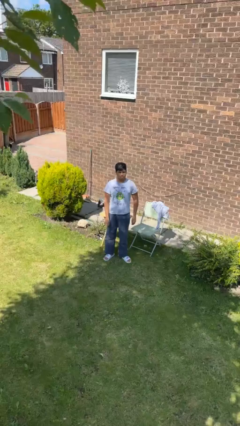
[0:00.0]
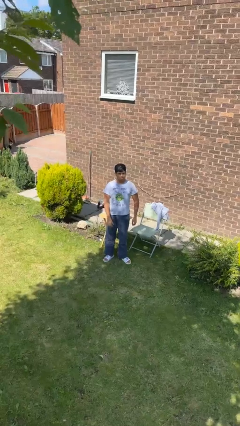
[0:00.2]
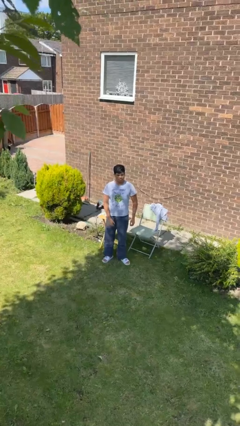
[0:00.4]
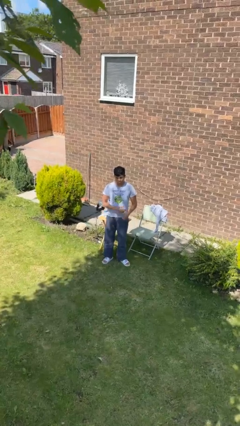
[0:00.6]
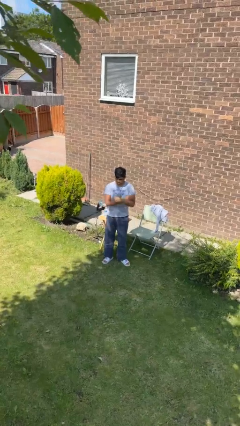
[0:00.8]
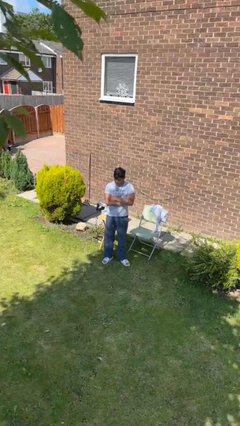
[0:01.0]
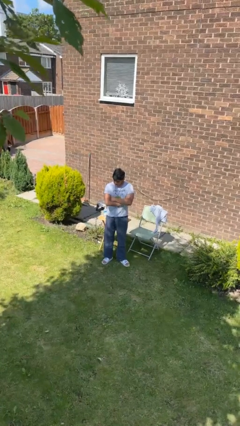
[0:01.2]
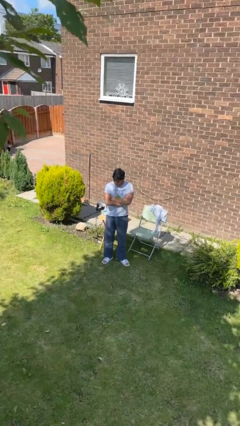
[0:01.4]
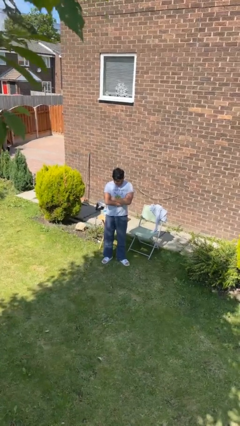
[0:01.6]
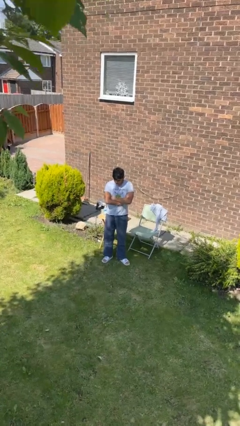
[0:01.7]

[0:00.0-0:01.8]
person crosses arms

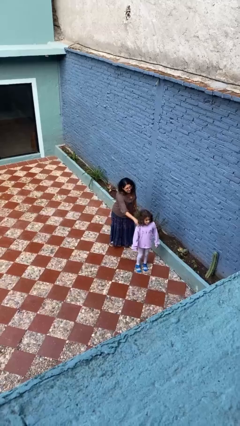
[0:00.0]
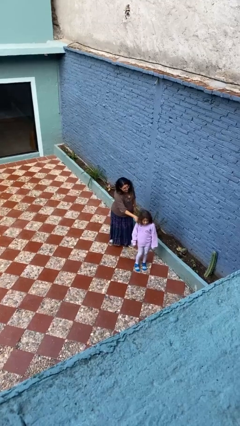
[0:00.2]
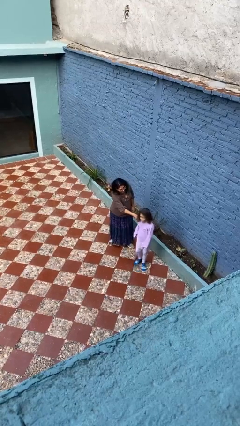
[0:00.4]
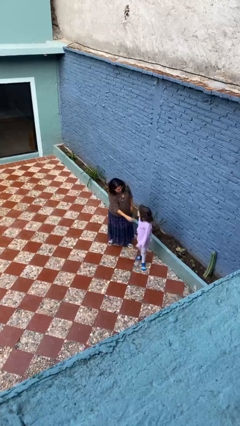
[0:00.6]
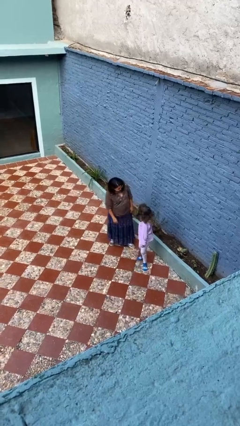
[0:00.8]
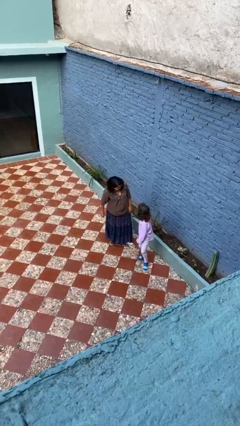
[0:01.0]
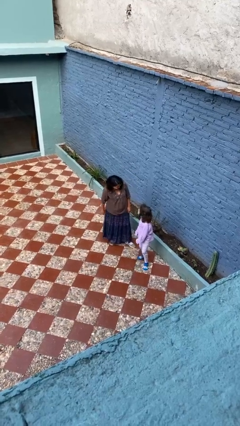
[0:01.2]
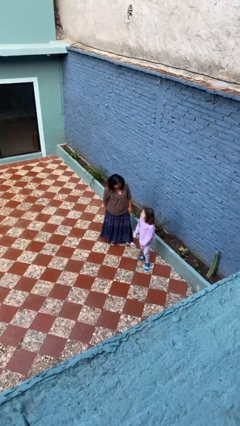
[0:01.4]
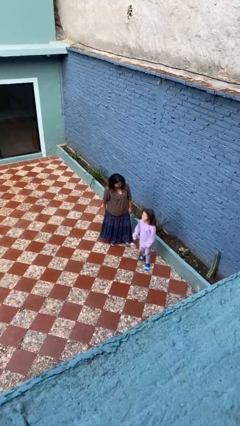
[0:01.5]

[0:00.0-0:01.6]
person spins person around

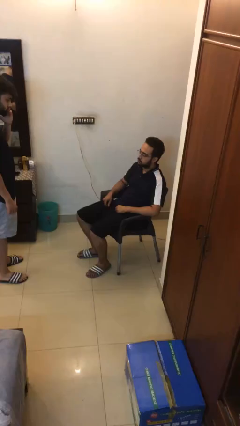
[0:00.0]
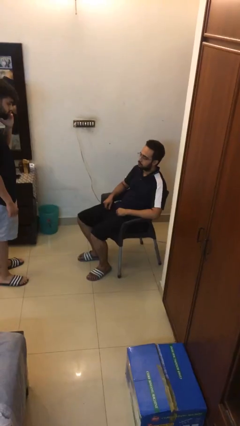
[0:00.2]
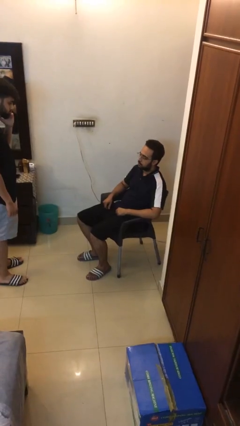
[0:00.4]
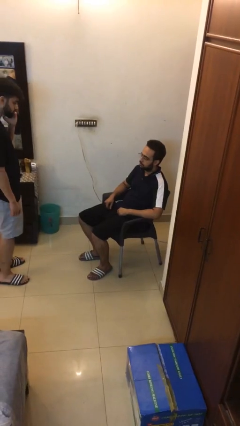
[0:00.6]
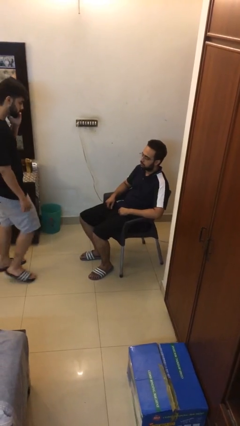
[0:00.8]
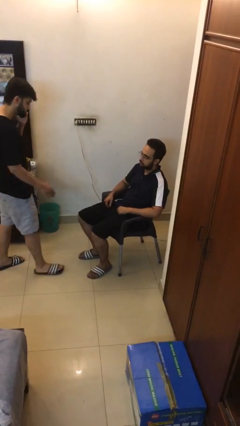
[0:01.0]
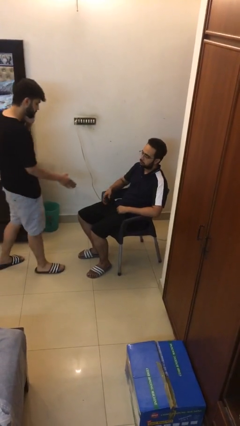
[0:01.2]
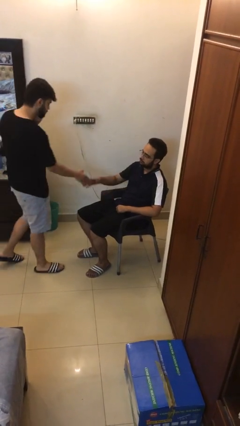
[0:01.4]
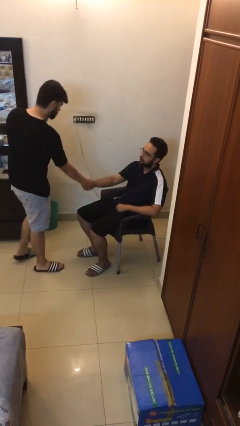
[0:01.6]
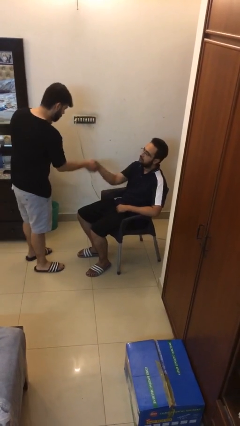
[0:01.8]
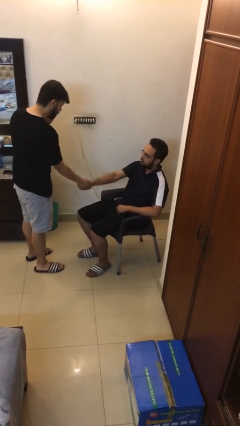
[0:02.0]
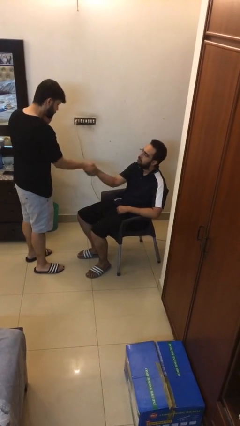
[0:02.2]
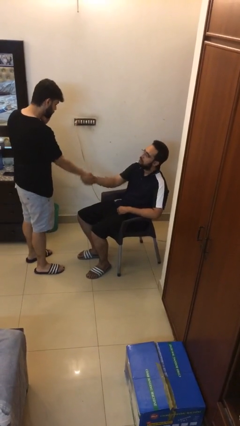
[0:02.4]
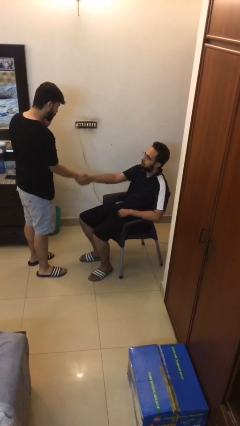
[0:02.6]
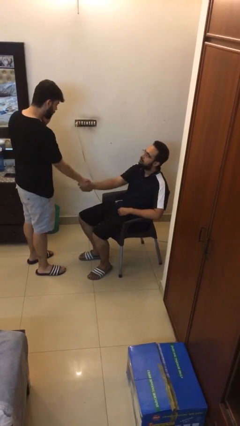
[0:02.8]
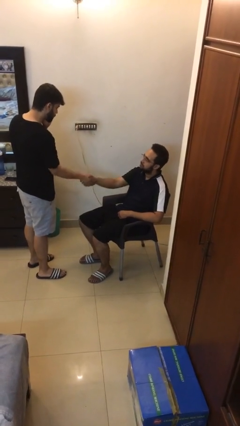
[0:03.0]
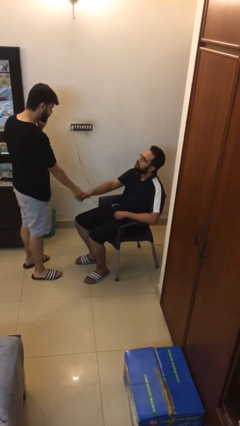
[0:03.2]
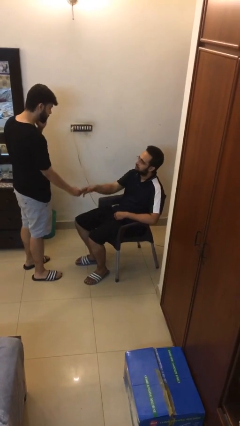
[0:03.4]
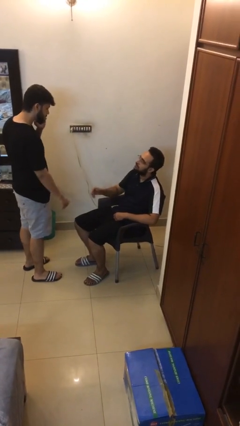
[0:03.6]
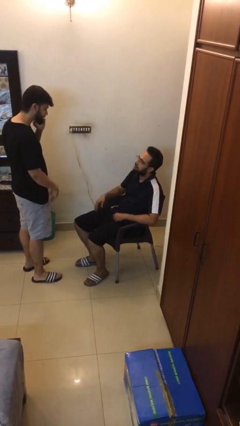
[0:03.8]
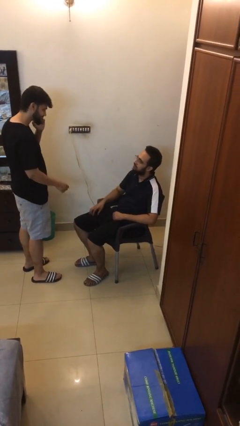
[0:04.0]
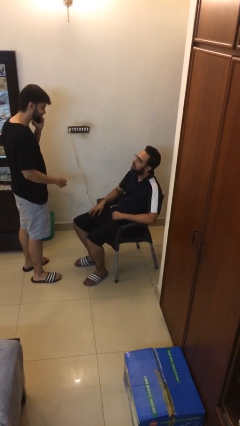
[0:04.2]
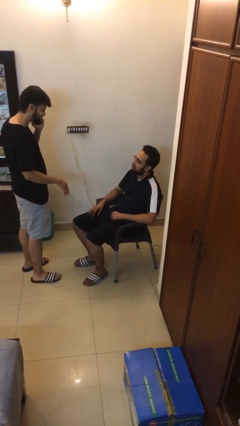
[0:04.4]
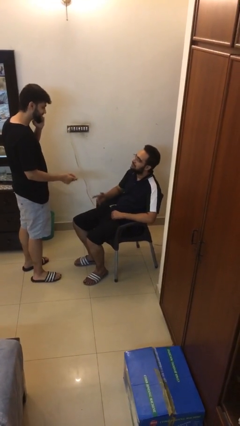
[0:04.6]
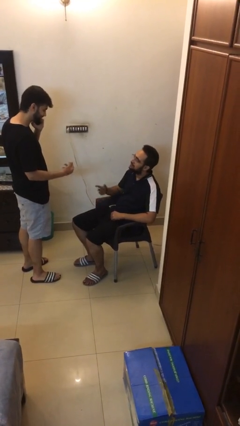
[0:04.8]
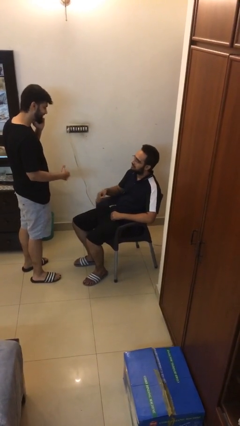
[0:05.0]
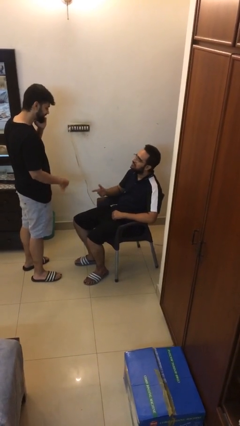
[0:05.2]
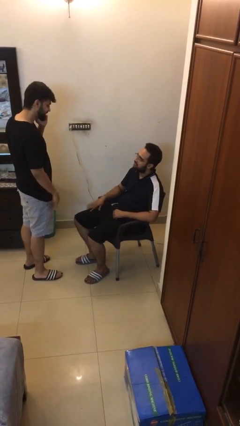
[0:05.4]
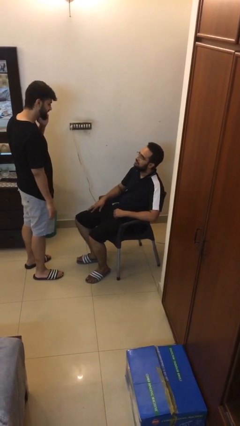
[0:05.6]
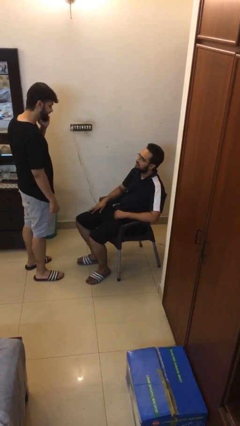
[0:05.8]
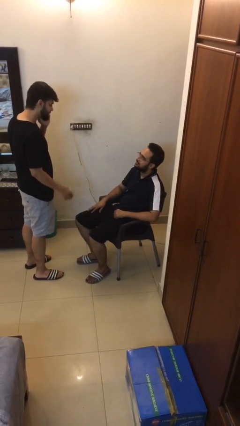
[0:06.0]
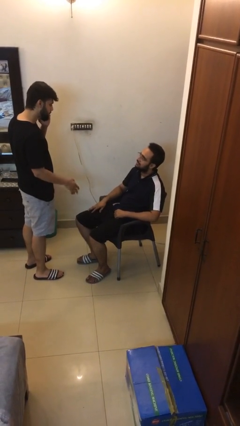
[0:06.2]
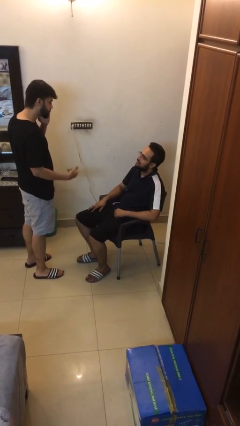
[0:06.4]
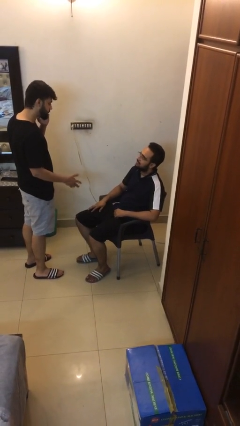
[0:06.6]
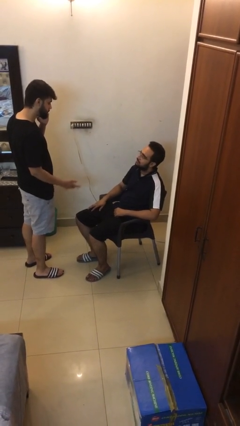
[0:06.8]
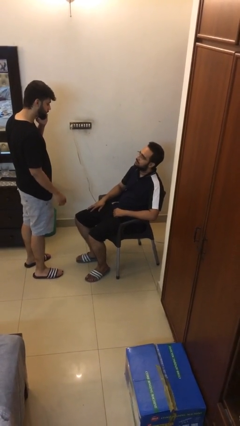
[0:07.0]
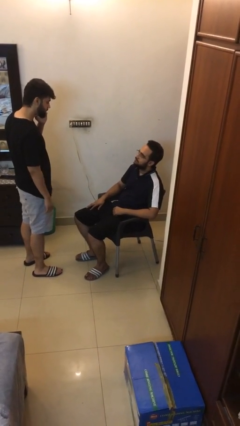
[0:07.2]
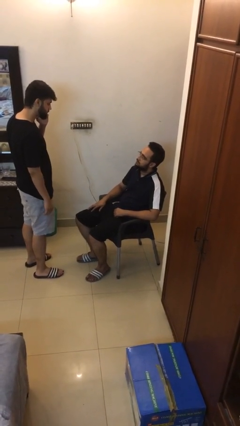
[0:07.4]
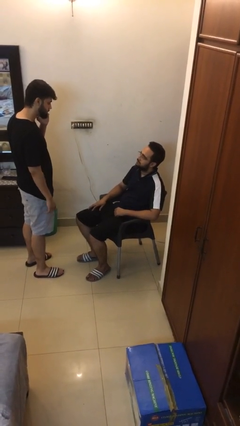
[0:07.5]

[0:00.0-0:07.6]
person shakes hand

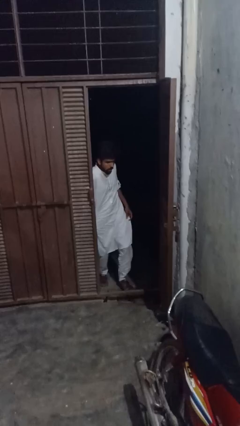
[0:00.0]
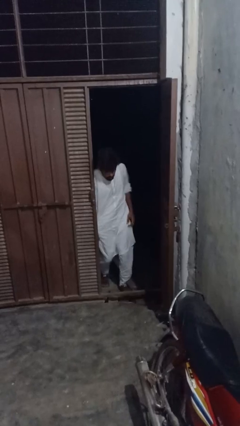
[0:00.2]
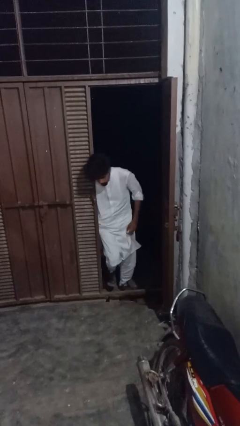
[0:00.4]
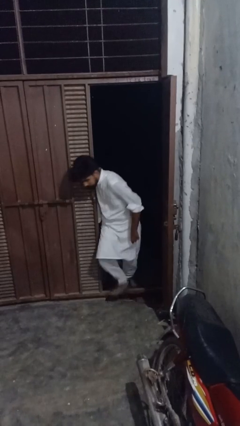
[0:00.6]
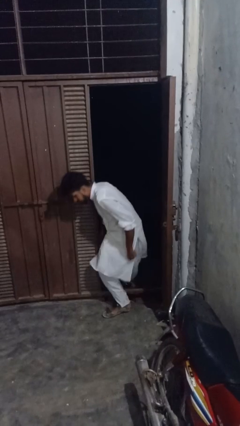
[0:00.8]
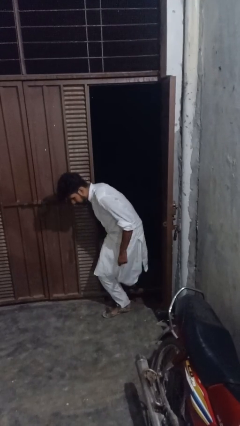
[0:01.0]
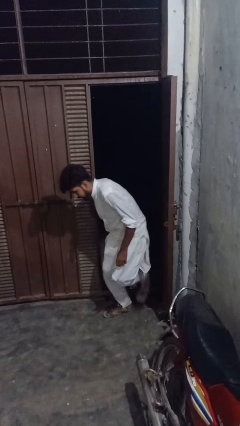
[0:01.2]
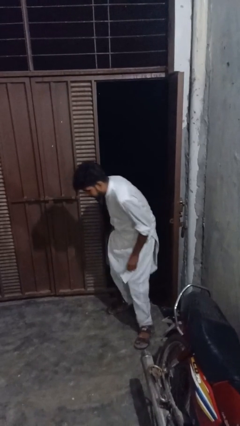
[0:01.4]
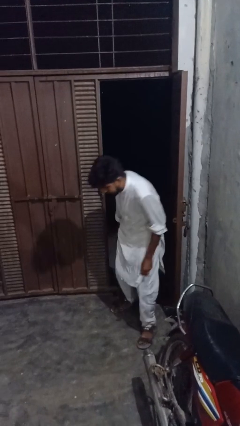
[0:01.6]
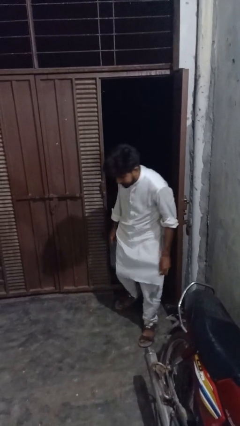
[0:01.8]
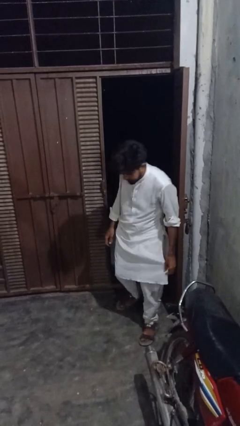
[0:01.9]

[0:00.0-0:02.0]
person bumps into wall

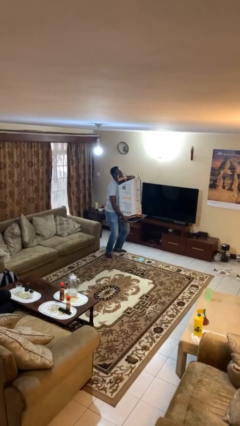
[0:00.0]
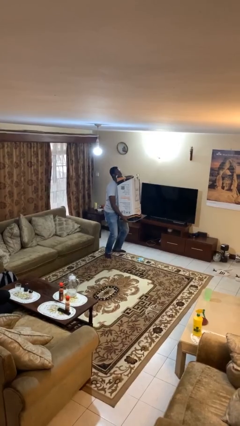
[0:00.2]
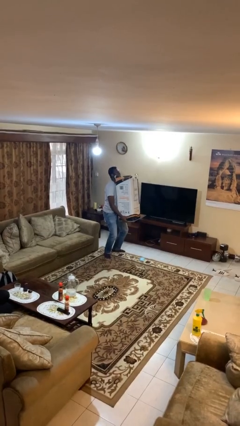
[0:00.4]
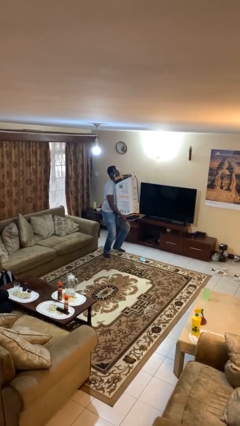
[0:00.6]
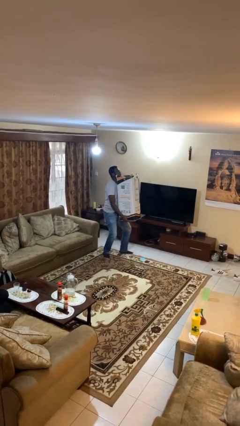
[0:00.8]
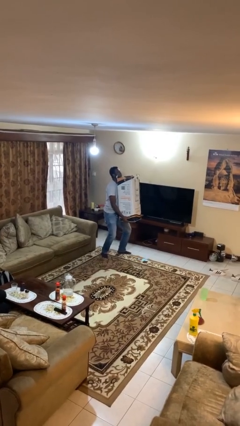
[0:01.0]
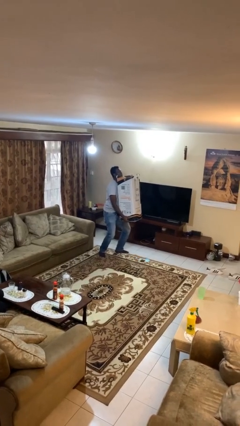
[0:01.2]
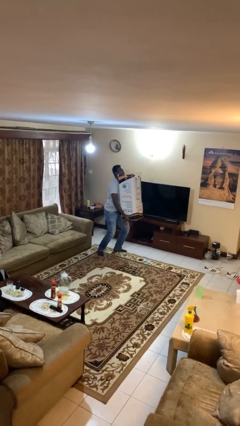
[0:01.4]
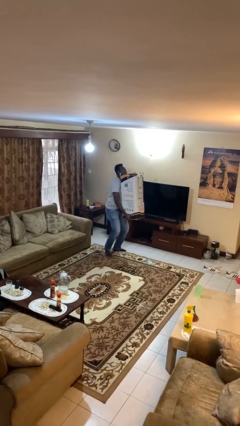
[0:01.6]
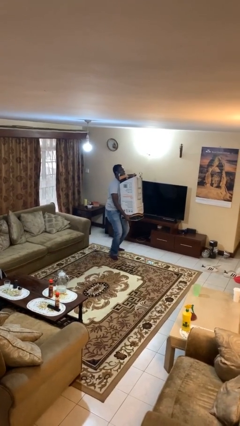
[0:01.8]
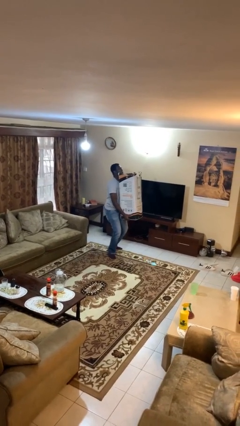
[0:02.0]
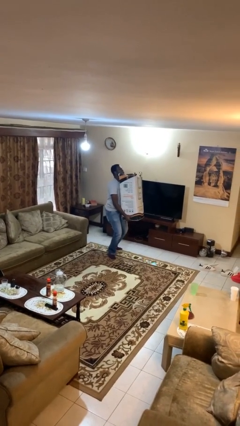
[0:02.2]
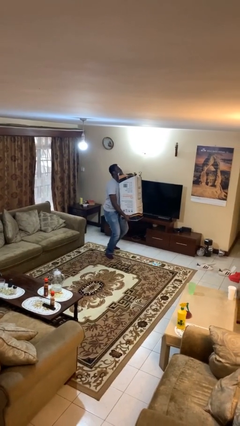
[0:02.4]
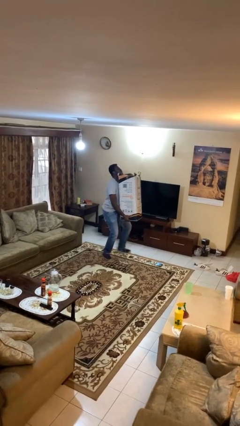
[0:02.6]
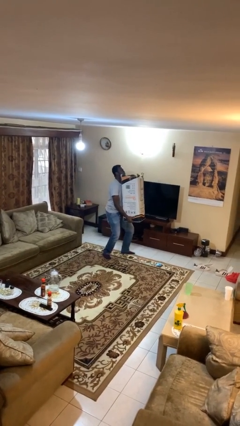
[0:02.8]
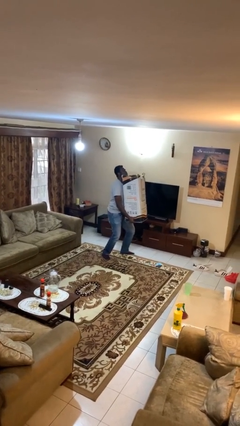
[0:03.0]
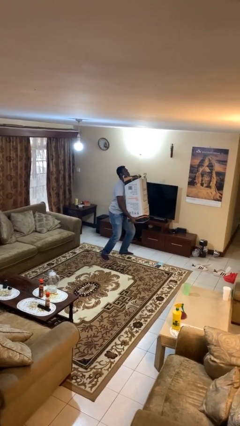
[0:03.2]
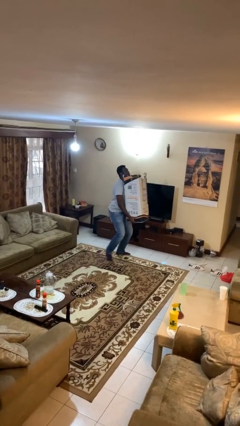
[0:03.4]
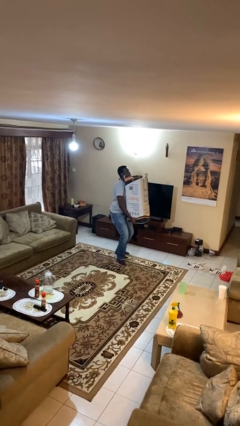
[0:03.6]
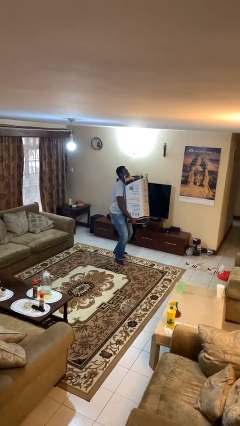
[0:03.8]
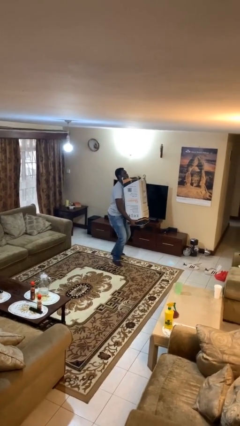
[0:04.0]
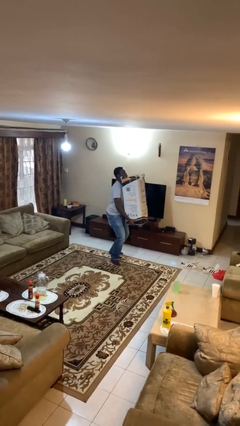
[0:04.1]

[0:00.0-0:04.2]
person carries heavy object

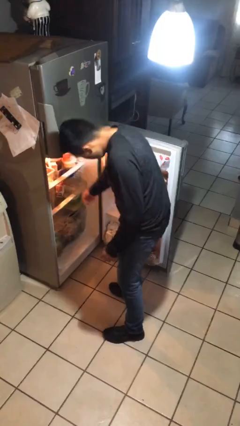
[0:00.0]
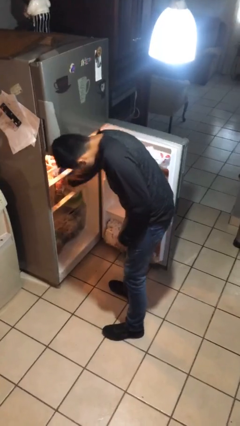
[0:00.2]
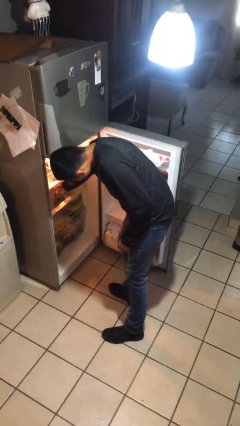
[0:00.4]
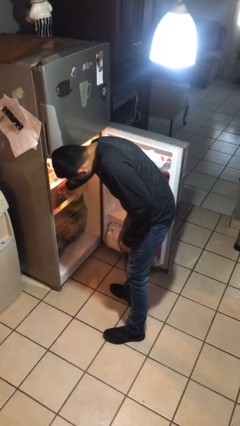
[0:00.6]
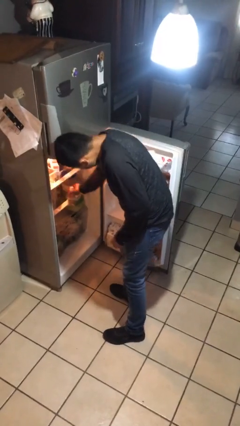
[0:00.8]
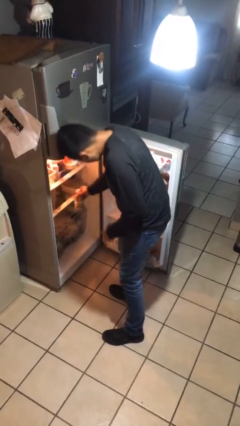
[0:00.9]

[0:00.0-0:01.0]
person puts object into refrigerator
